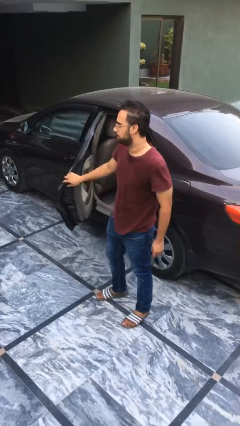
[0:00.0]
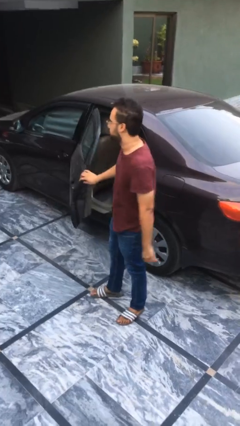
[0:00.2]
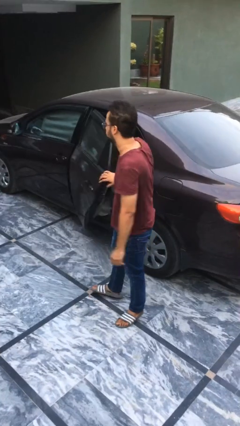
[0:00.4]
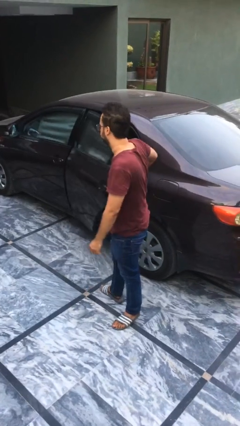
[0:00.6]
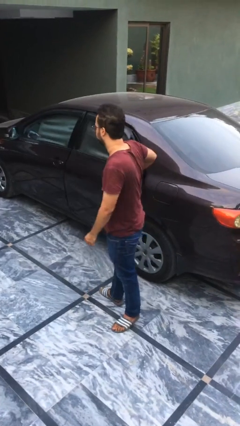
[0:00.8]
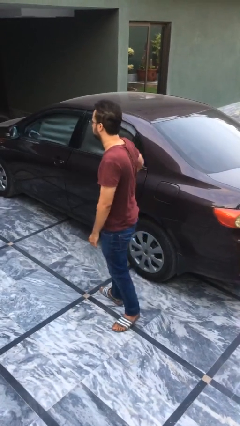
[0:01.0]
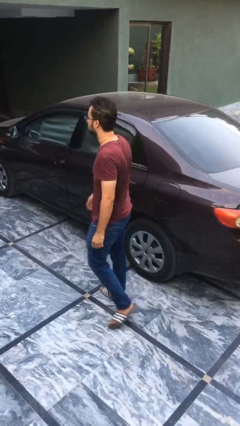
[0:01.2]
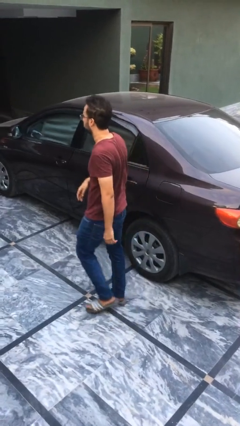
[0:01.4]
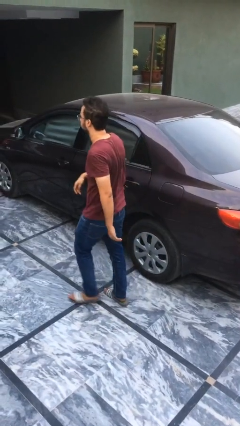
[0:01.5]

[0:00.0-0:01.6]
person closes car door

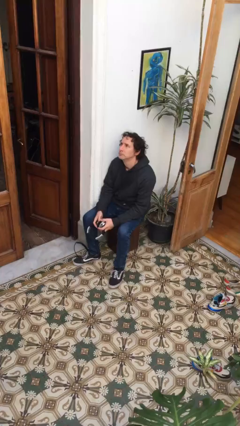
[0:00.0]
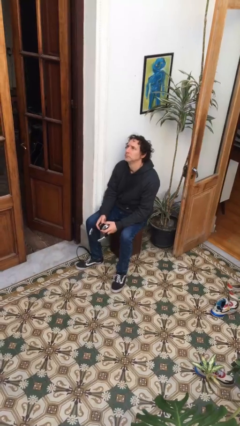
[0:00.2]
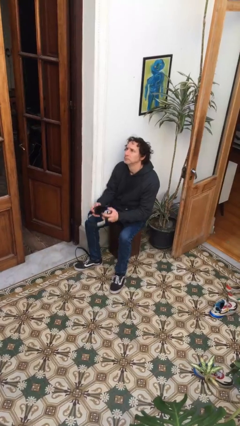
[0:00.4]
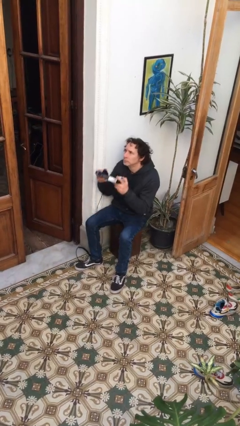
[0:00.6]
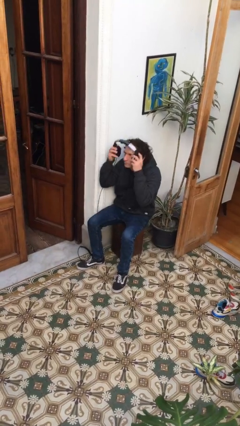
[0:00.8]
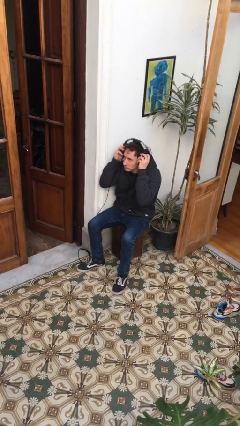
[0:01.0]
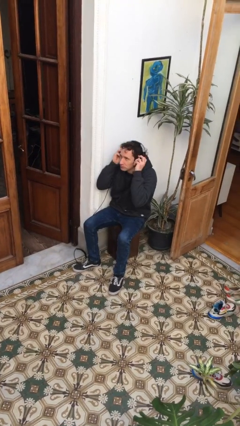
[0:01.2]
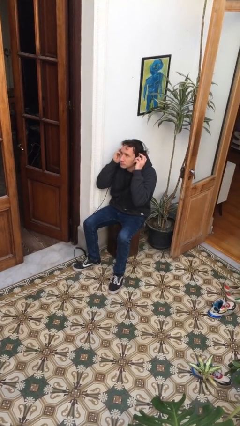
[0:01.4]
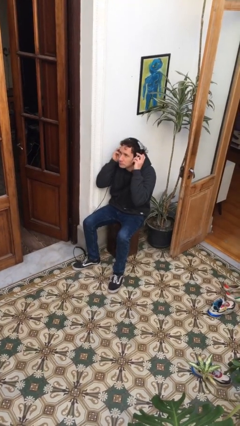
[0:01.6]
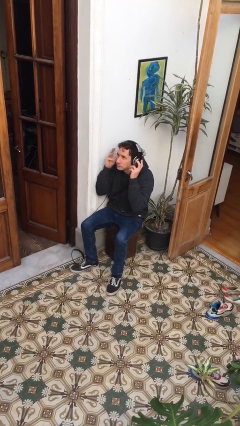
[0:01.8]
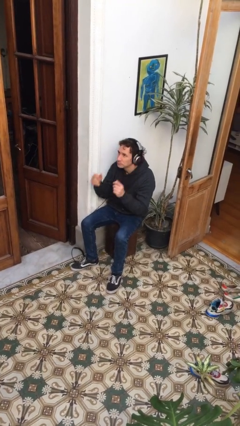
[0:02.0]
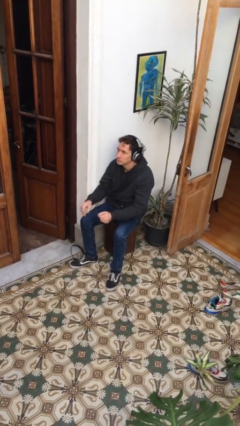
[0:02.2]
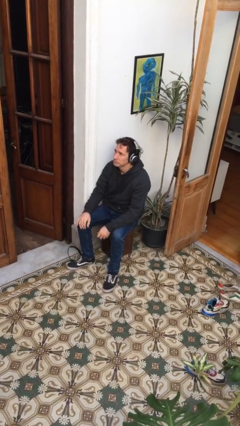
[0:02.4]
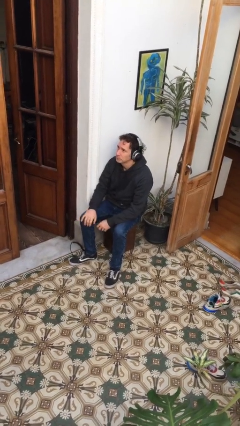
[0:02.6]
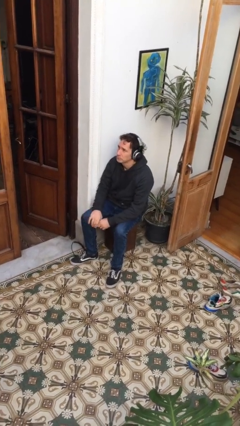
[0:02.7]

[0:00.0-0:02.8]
person puts on headphones

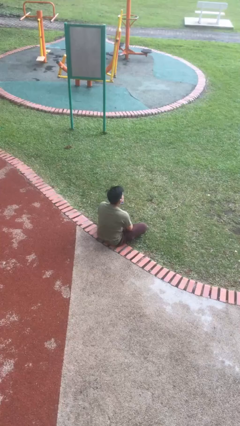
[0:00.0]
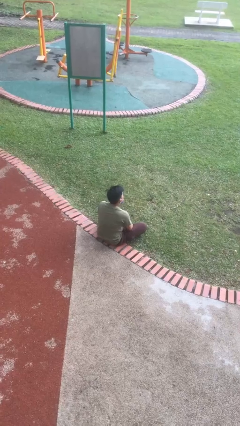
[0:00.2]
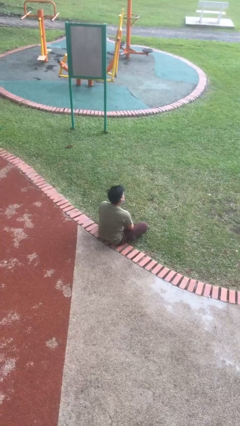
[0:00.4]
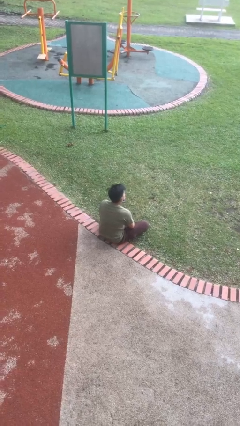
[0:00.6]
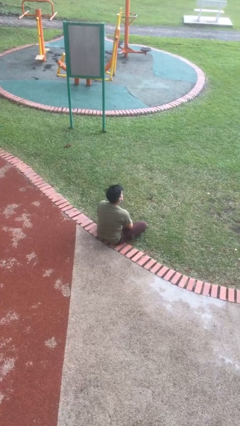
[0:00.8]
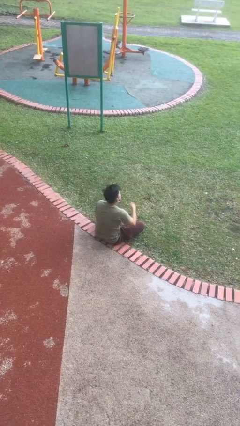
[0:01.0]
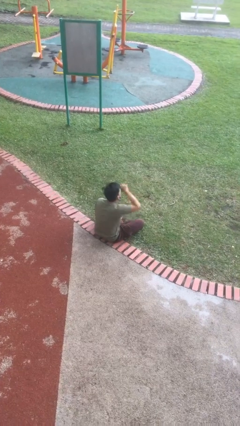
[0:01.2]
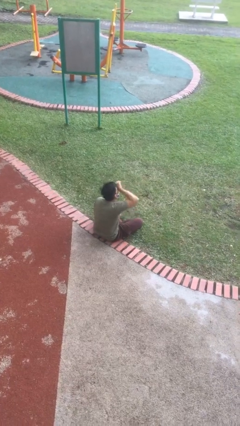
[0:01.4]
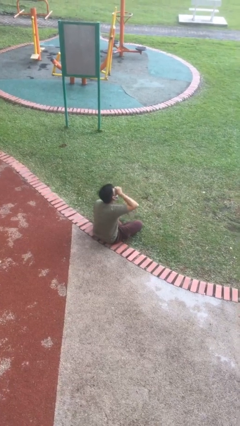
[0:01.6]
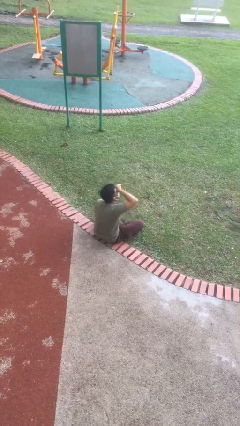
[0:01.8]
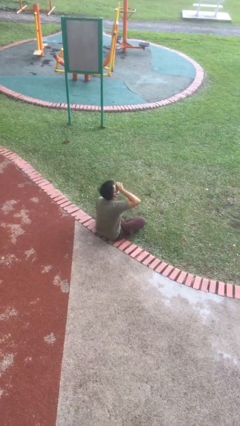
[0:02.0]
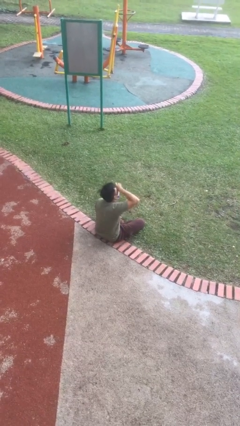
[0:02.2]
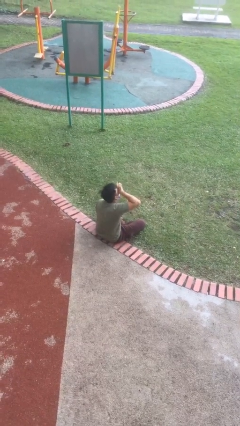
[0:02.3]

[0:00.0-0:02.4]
person rubs eyes

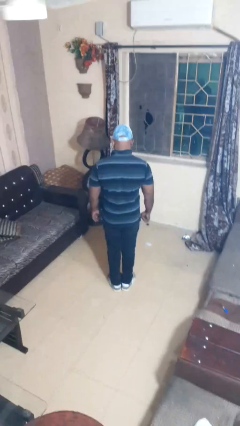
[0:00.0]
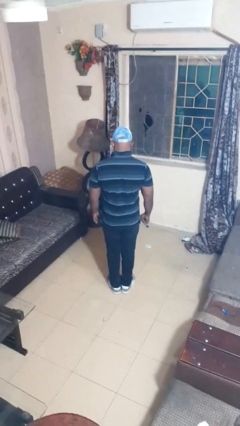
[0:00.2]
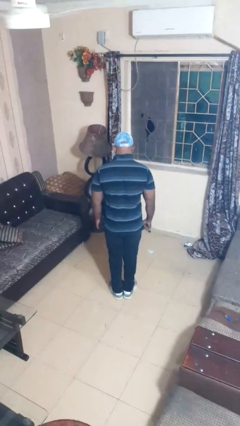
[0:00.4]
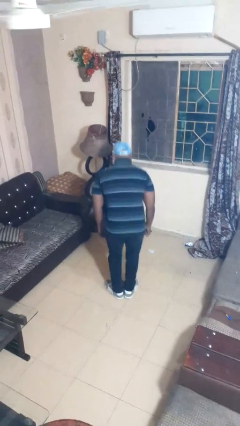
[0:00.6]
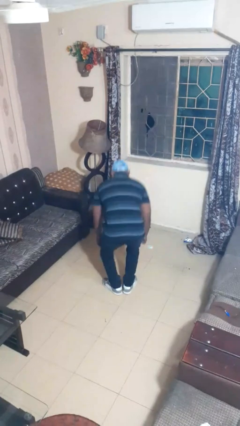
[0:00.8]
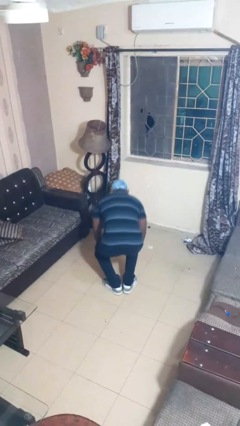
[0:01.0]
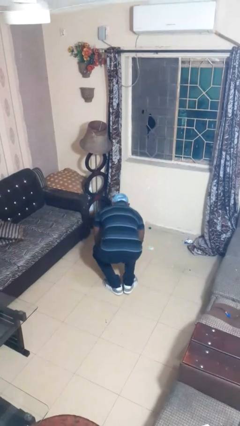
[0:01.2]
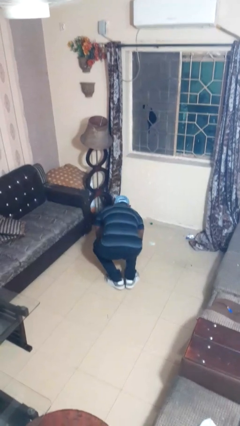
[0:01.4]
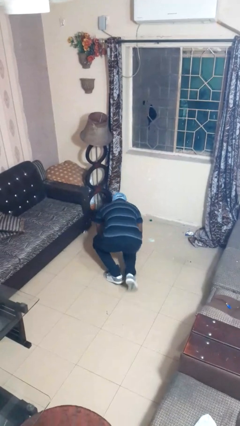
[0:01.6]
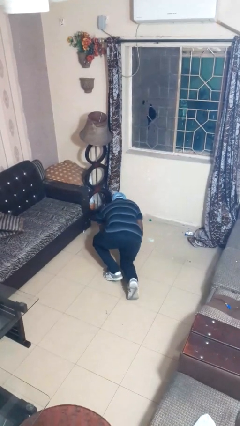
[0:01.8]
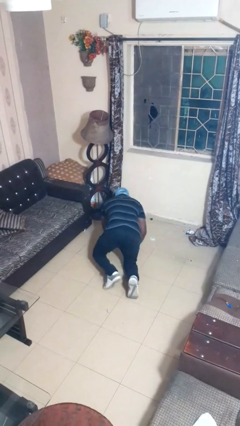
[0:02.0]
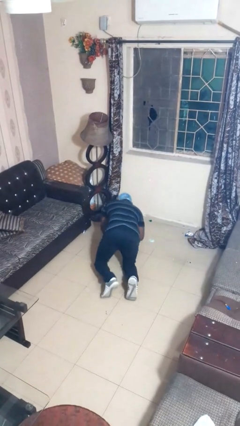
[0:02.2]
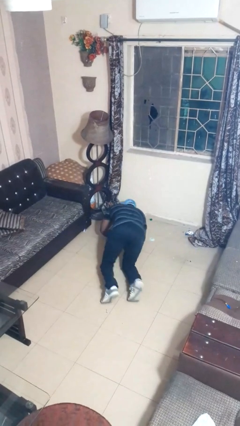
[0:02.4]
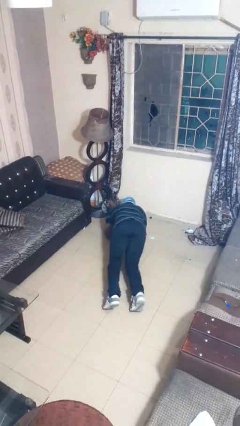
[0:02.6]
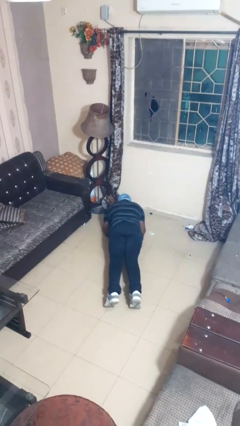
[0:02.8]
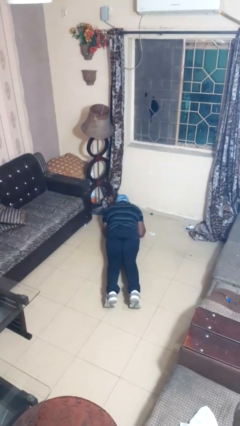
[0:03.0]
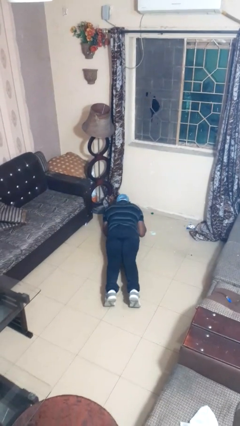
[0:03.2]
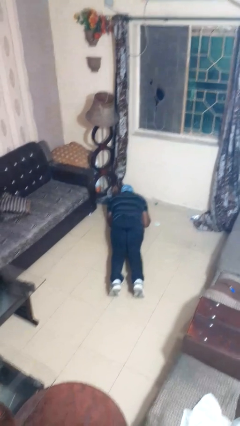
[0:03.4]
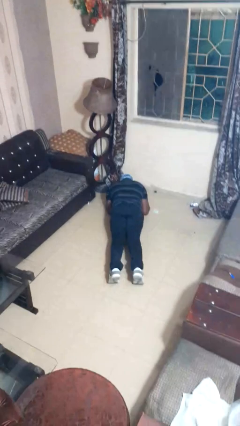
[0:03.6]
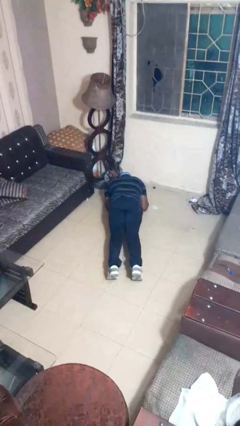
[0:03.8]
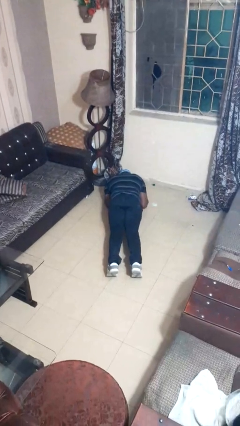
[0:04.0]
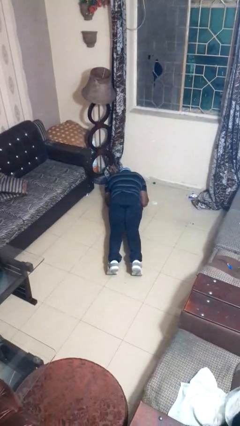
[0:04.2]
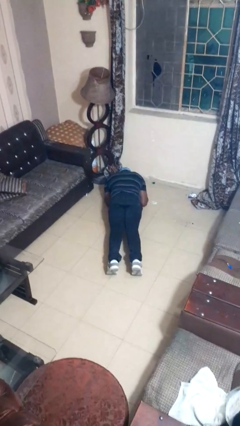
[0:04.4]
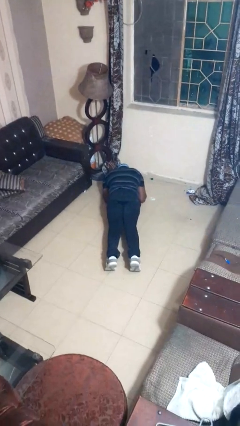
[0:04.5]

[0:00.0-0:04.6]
person exercises with plank

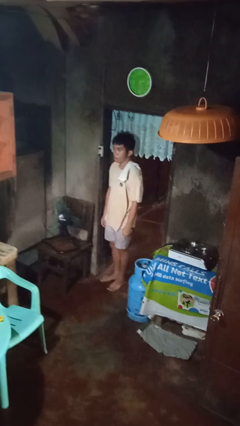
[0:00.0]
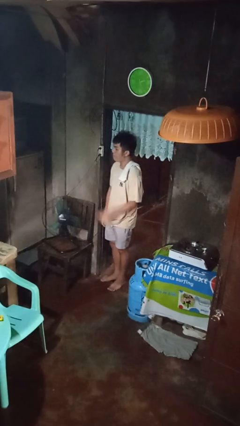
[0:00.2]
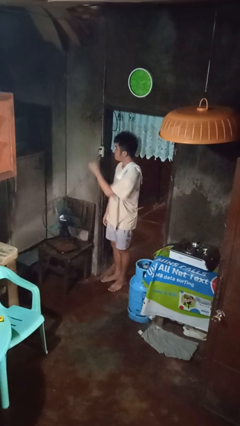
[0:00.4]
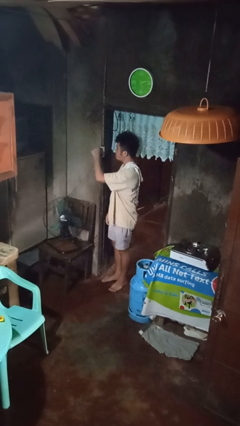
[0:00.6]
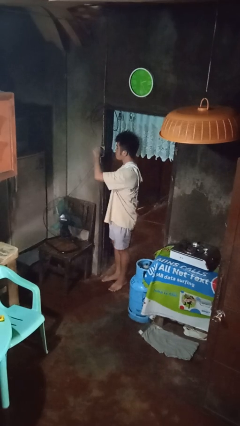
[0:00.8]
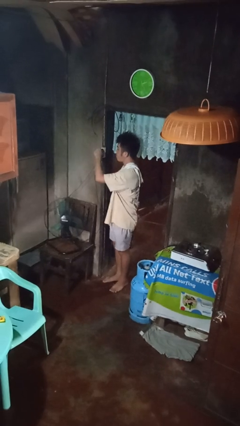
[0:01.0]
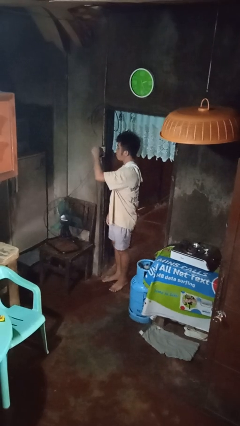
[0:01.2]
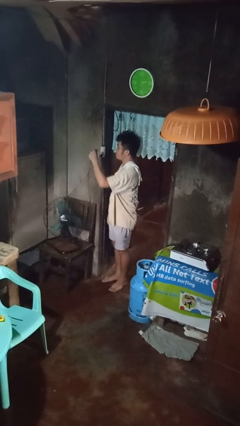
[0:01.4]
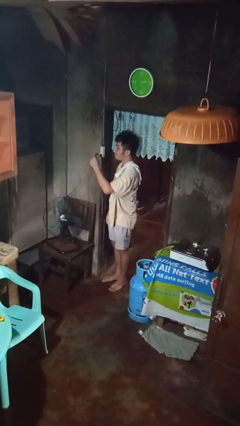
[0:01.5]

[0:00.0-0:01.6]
person unplugs from electrical socket

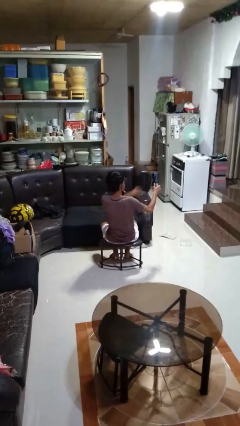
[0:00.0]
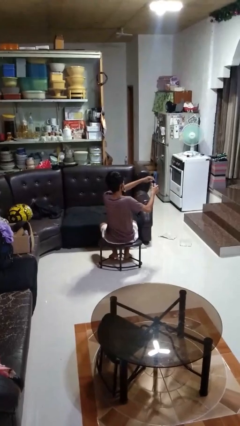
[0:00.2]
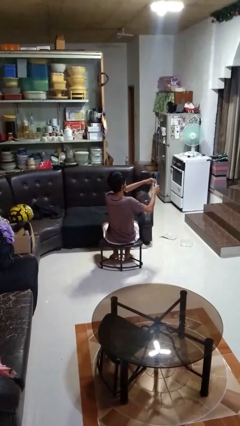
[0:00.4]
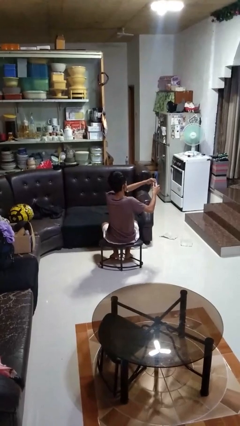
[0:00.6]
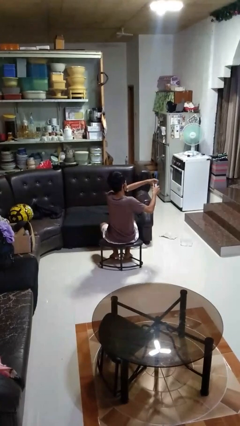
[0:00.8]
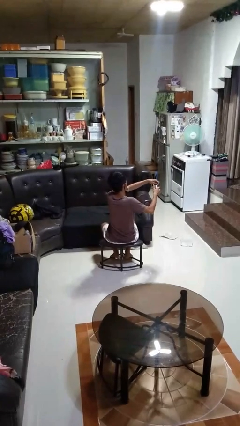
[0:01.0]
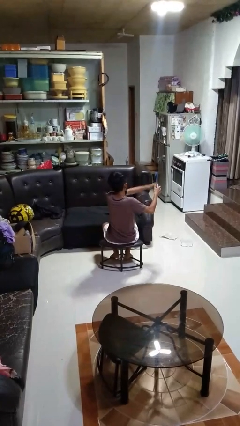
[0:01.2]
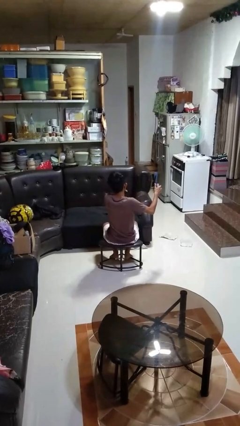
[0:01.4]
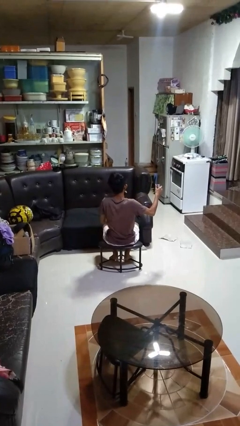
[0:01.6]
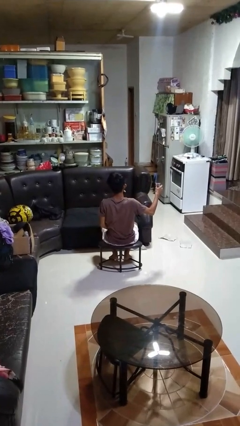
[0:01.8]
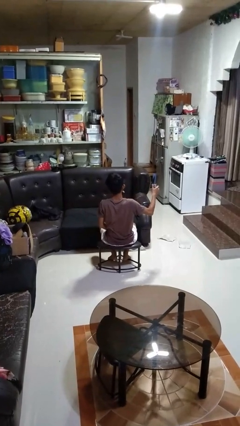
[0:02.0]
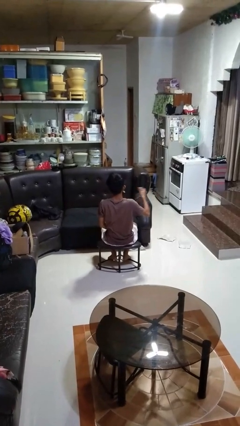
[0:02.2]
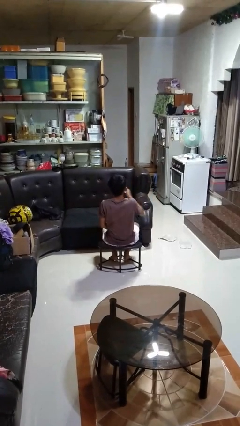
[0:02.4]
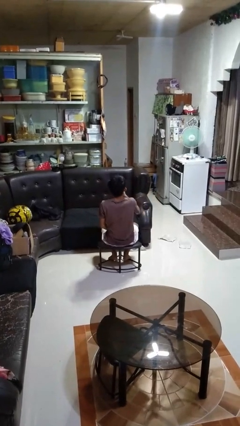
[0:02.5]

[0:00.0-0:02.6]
person opens beverage can

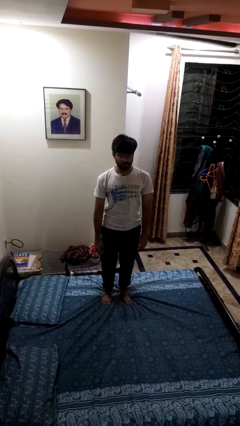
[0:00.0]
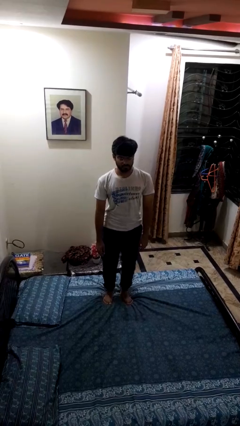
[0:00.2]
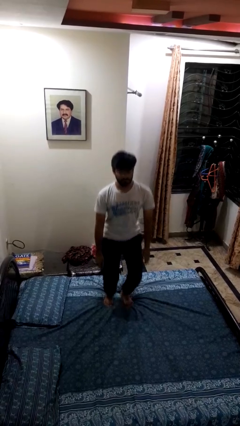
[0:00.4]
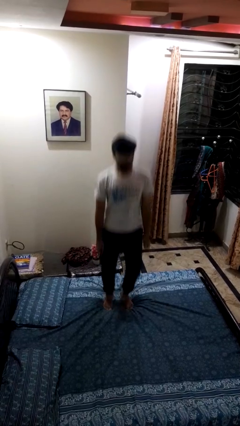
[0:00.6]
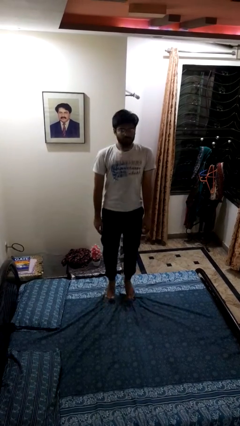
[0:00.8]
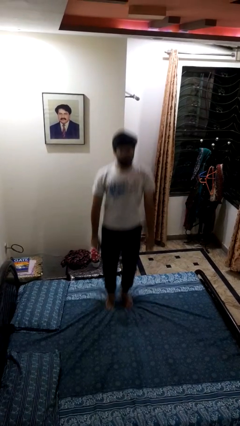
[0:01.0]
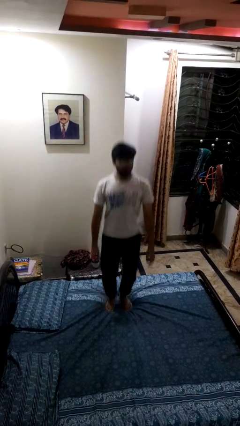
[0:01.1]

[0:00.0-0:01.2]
person jumps on bed
